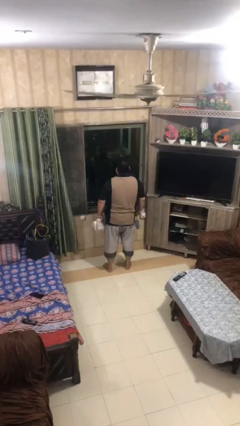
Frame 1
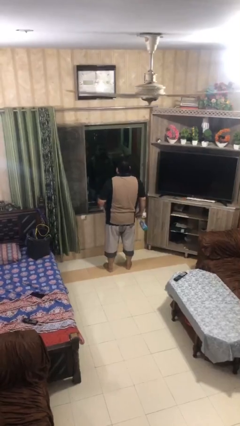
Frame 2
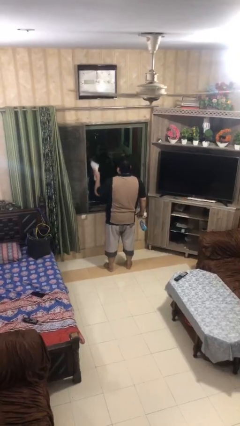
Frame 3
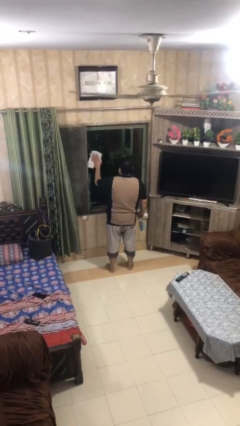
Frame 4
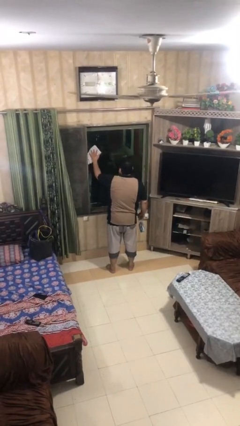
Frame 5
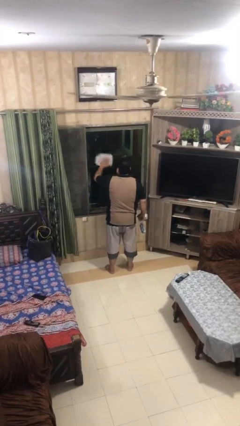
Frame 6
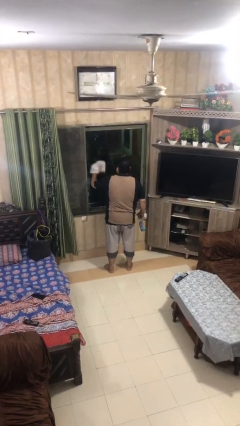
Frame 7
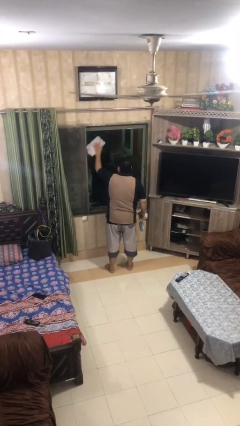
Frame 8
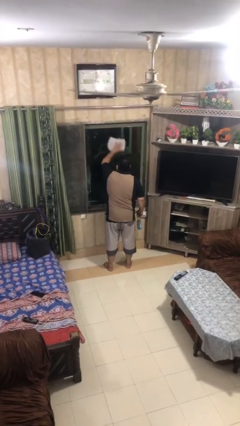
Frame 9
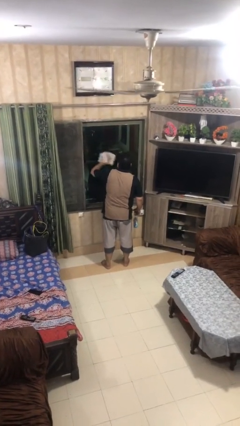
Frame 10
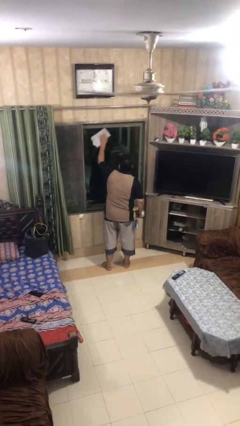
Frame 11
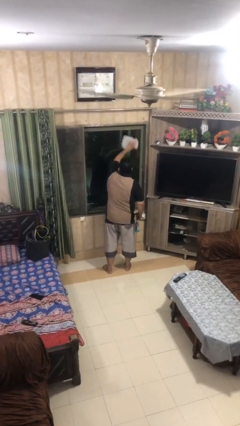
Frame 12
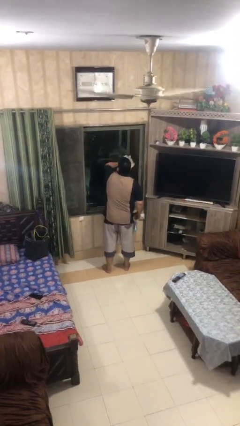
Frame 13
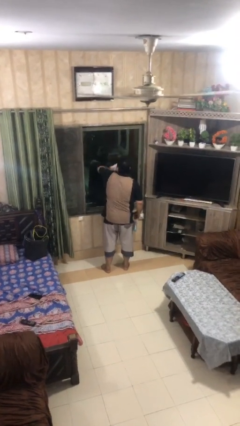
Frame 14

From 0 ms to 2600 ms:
person washes window

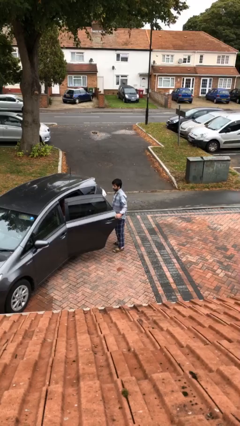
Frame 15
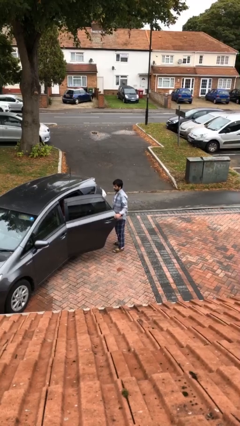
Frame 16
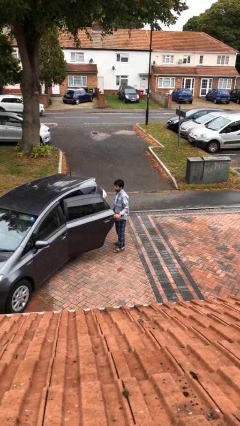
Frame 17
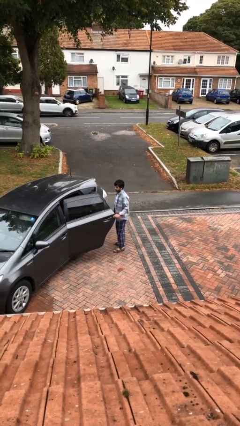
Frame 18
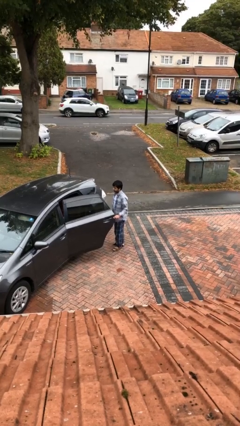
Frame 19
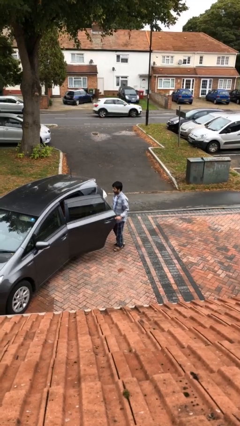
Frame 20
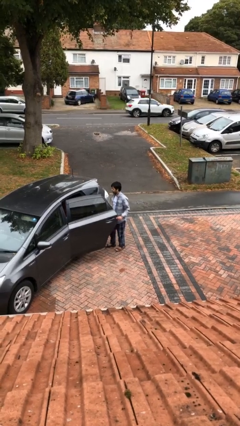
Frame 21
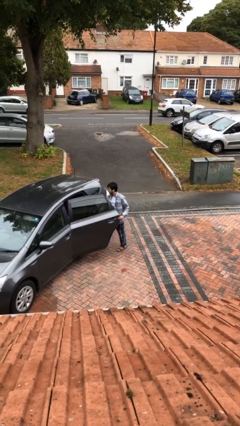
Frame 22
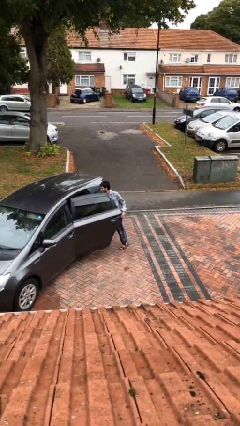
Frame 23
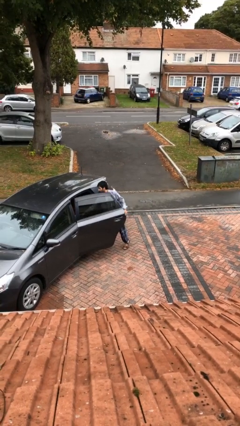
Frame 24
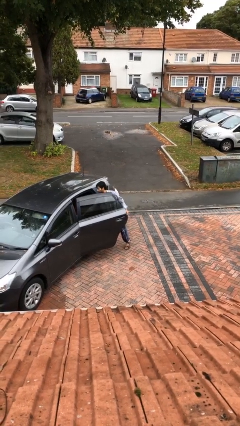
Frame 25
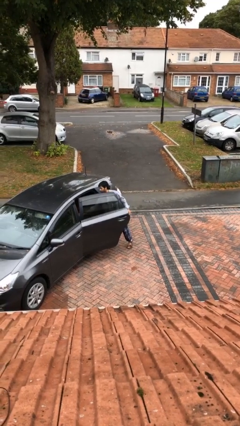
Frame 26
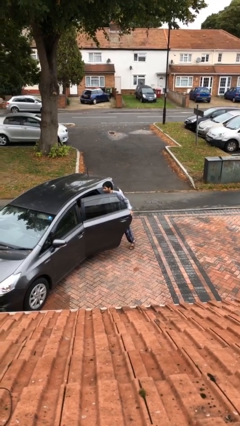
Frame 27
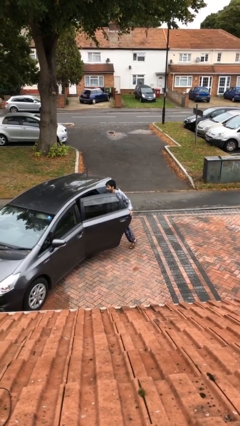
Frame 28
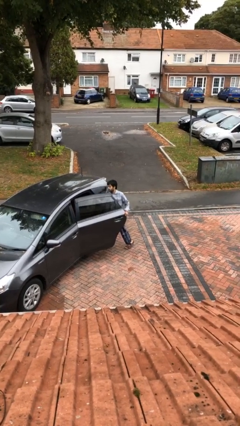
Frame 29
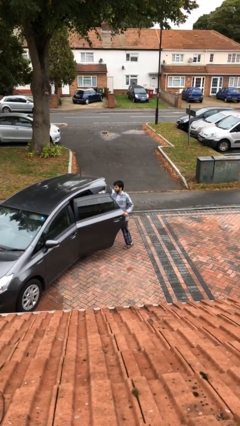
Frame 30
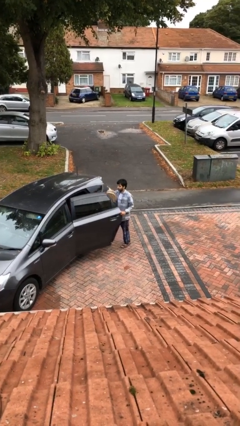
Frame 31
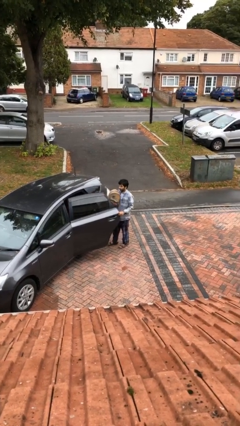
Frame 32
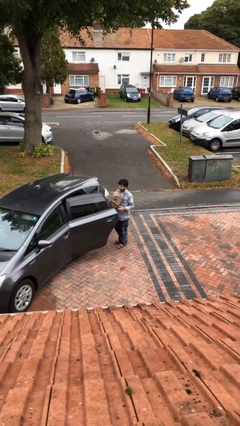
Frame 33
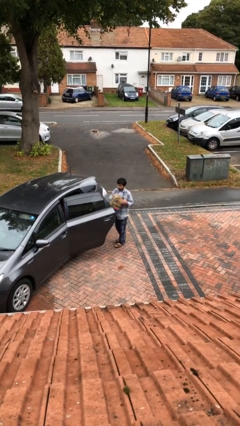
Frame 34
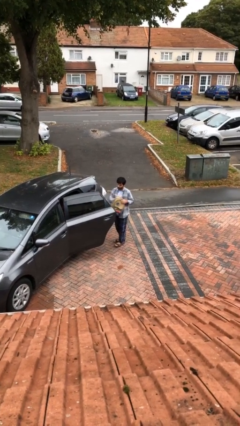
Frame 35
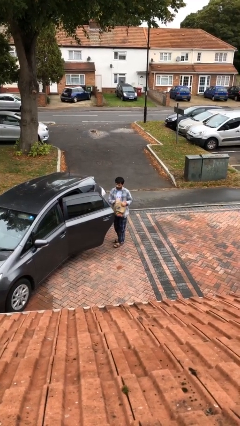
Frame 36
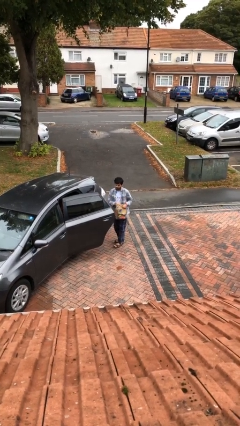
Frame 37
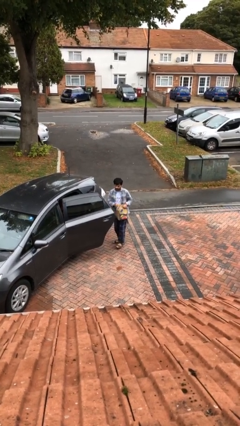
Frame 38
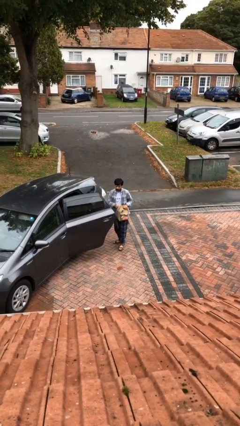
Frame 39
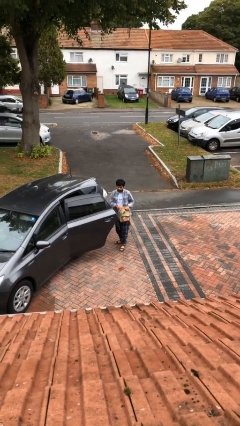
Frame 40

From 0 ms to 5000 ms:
person unloads car

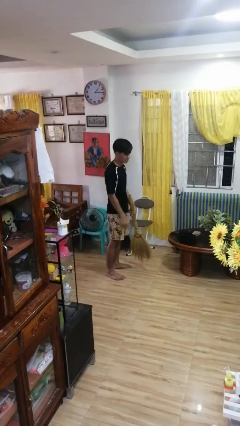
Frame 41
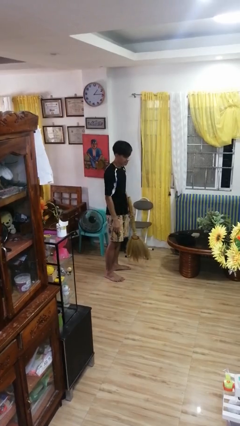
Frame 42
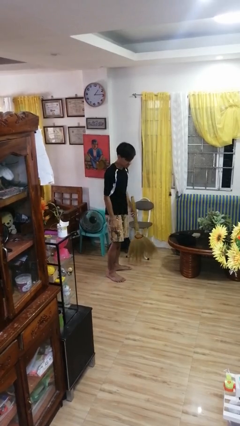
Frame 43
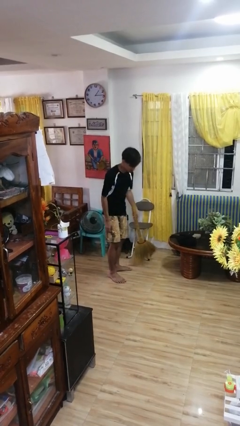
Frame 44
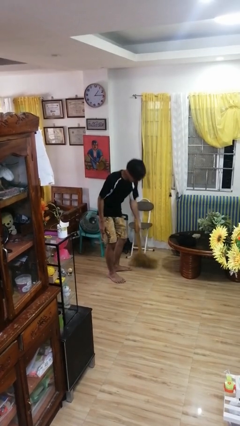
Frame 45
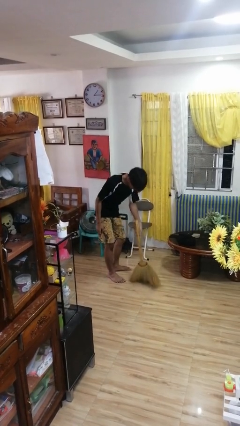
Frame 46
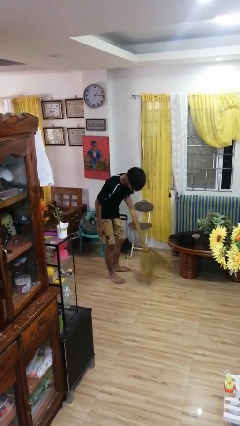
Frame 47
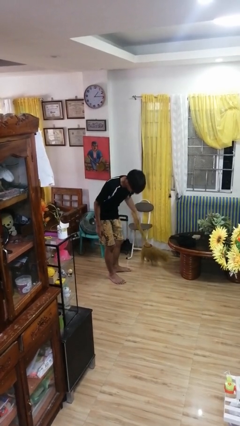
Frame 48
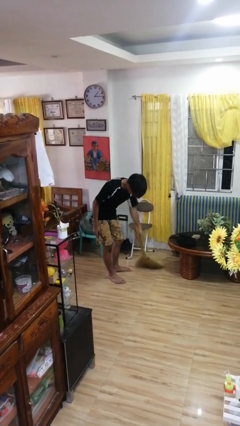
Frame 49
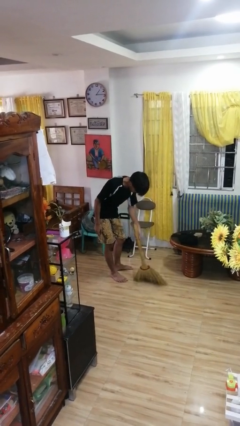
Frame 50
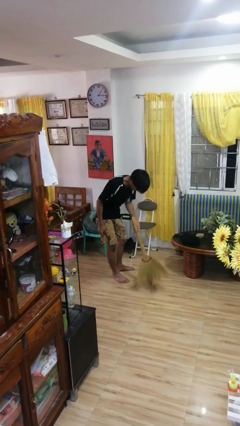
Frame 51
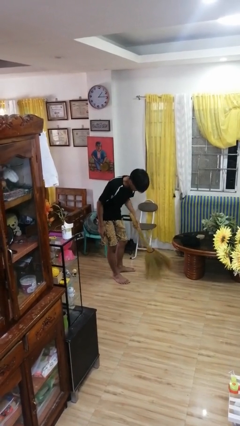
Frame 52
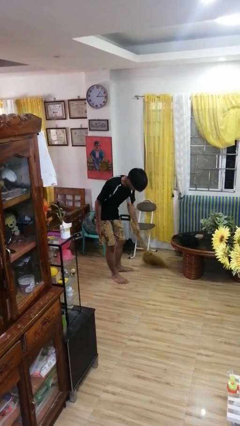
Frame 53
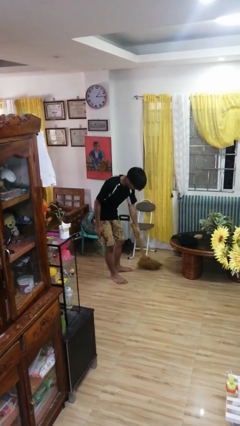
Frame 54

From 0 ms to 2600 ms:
person sweeps floor

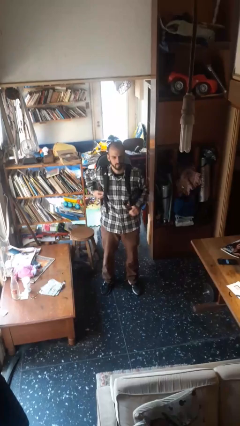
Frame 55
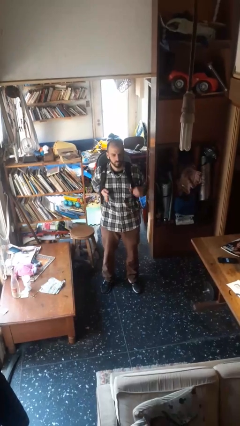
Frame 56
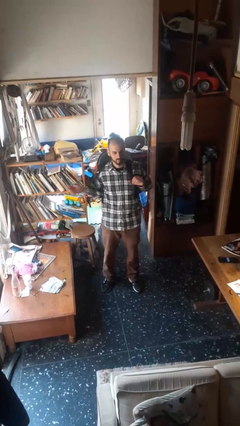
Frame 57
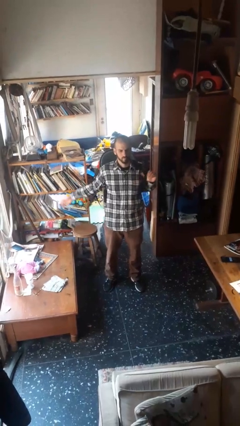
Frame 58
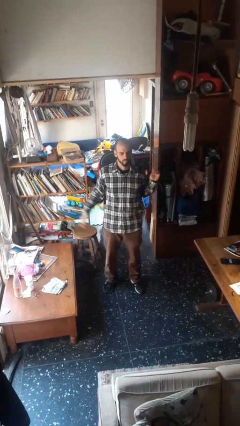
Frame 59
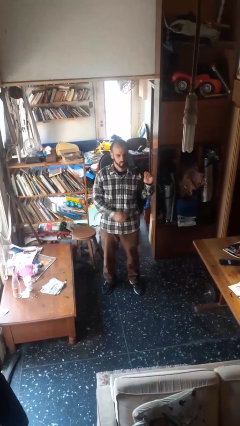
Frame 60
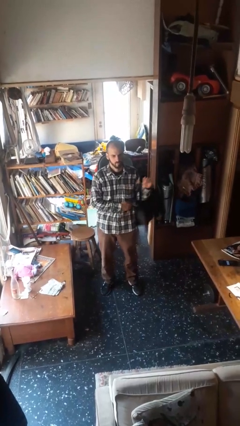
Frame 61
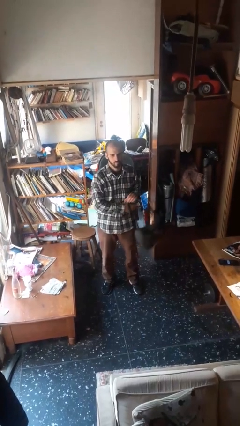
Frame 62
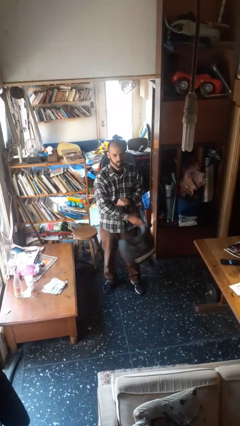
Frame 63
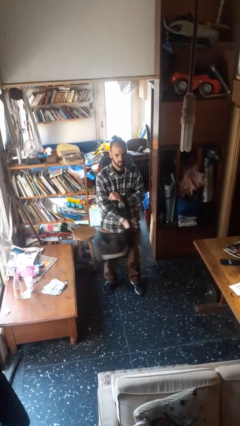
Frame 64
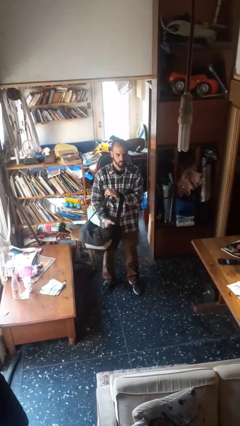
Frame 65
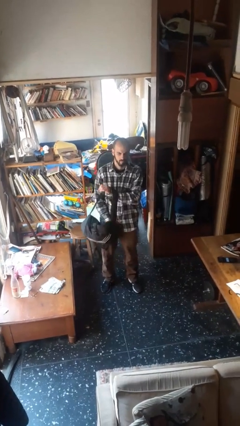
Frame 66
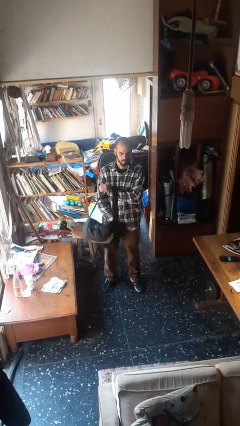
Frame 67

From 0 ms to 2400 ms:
person takes off backpack

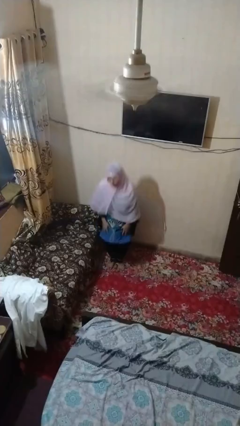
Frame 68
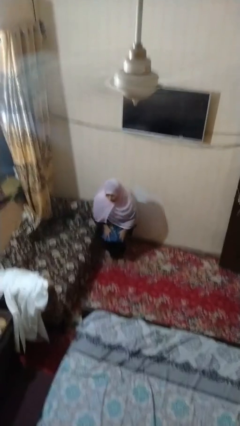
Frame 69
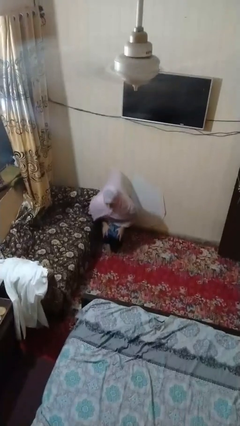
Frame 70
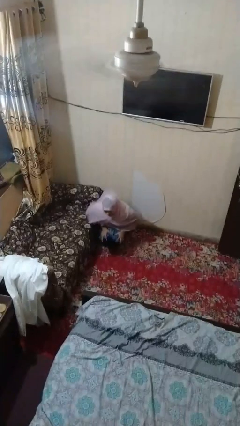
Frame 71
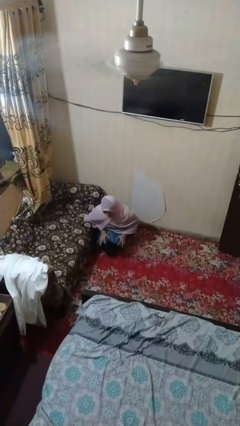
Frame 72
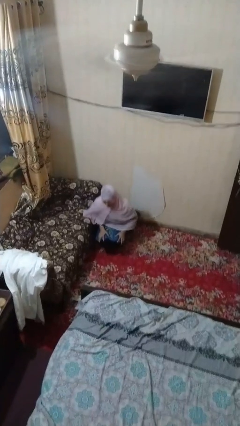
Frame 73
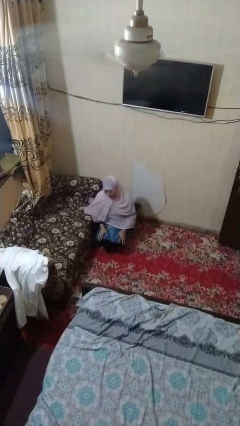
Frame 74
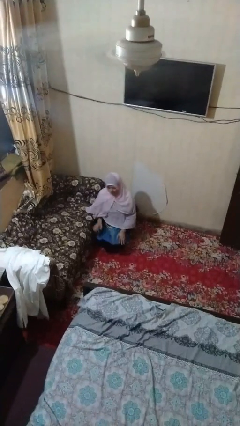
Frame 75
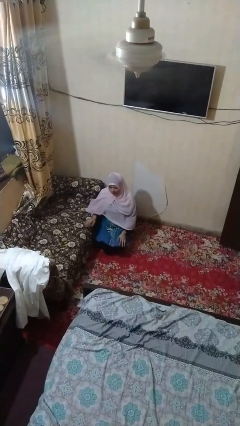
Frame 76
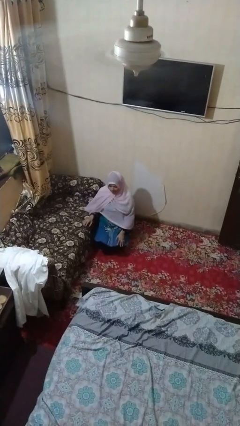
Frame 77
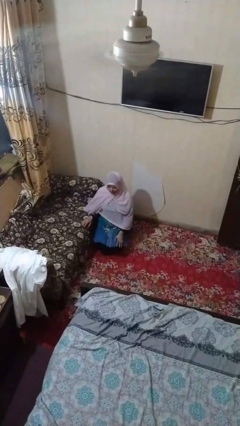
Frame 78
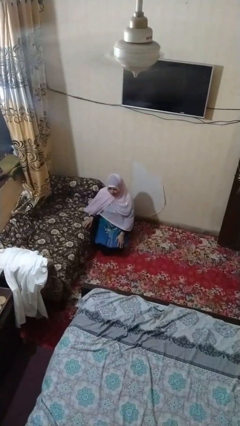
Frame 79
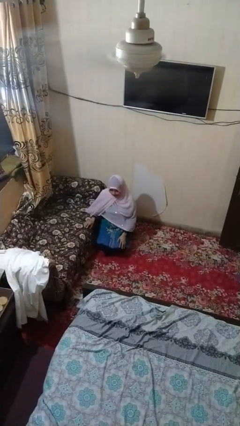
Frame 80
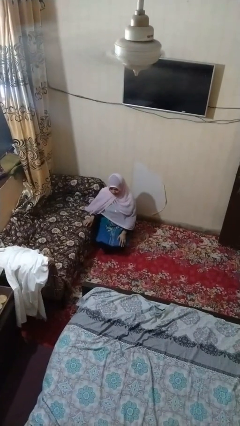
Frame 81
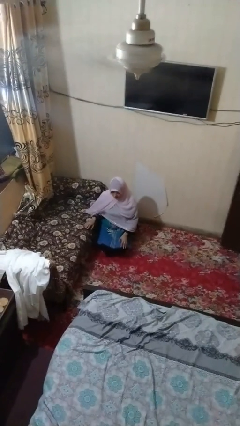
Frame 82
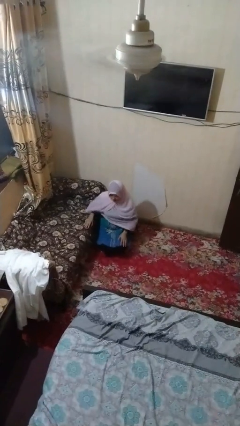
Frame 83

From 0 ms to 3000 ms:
person squats

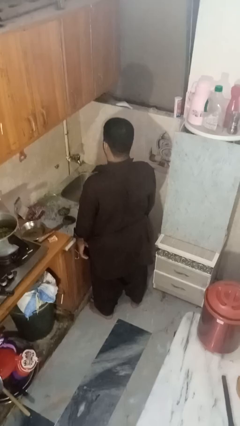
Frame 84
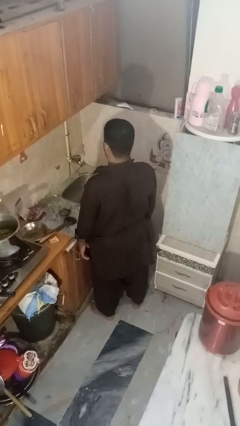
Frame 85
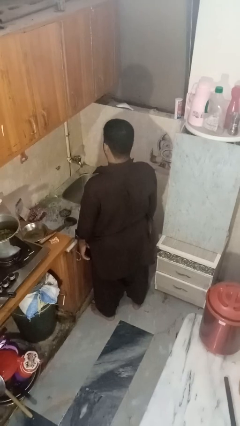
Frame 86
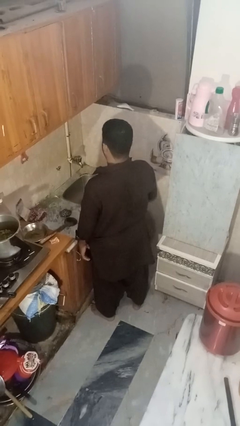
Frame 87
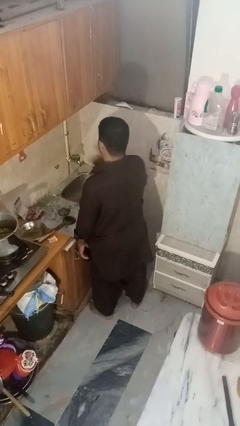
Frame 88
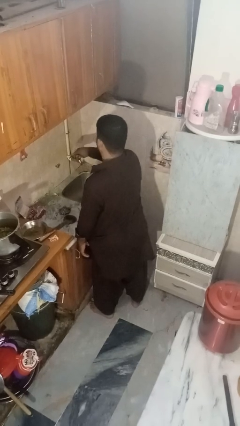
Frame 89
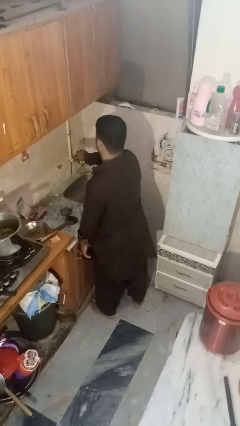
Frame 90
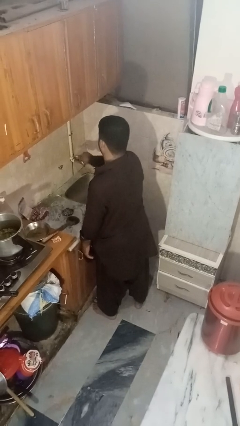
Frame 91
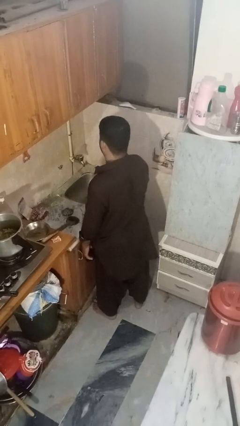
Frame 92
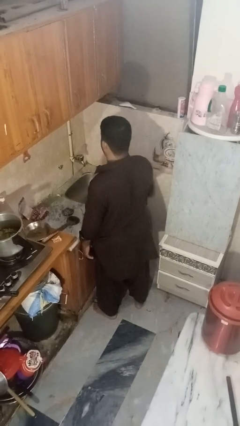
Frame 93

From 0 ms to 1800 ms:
person turns off faucet

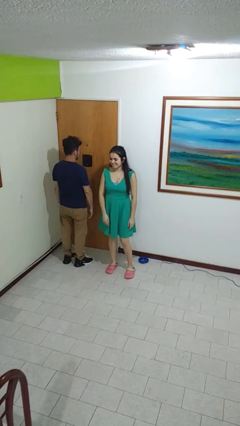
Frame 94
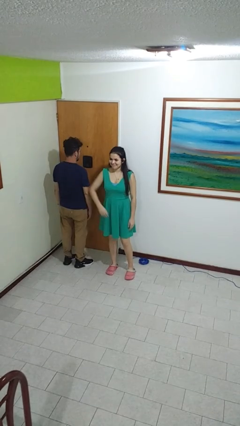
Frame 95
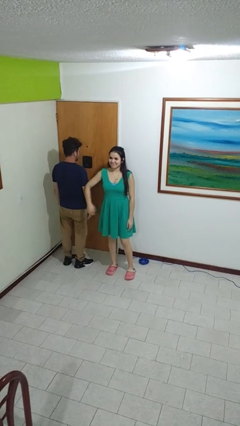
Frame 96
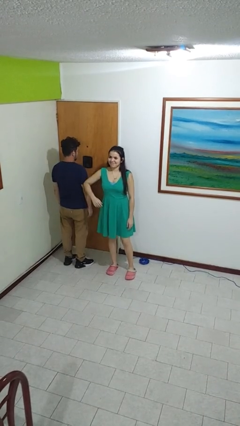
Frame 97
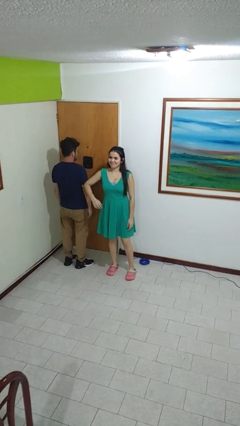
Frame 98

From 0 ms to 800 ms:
person nudges person with elbow
